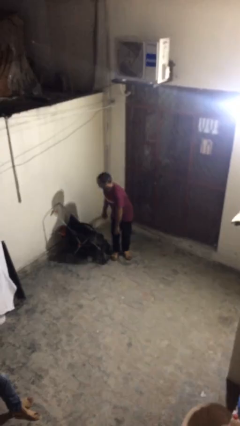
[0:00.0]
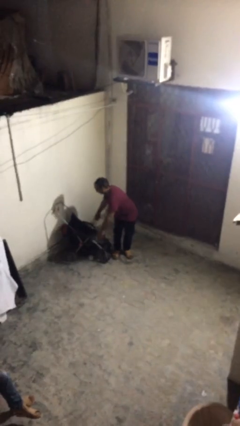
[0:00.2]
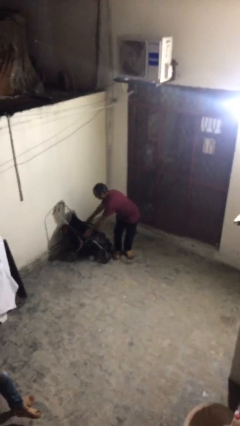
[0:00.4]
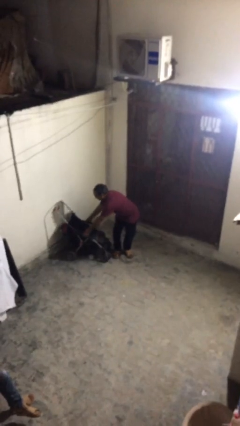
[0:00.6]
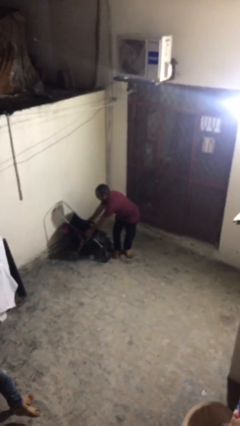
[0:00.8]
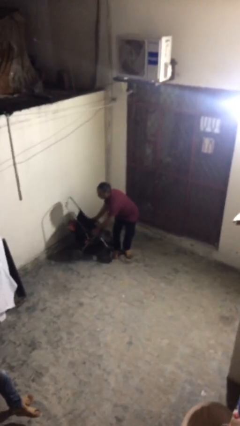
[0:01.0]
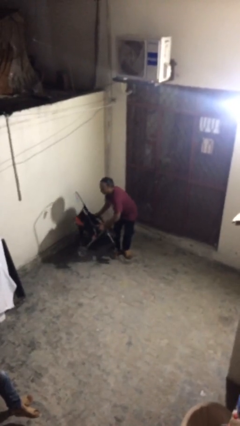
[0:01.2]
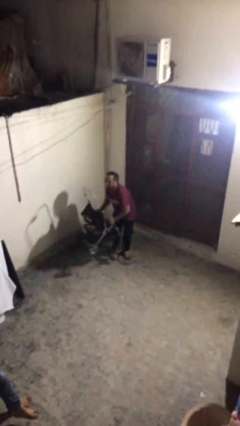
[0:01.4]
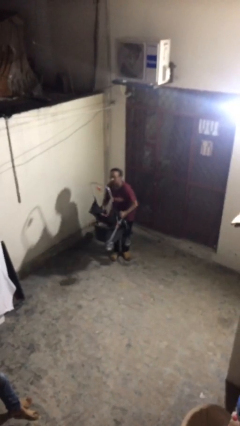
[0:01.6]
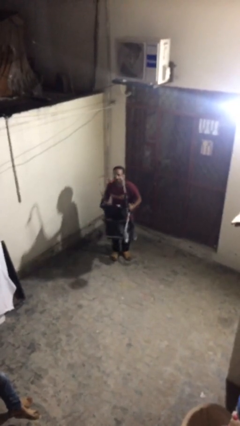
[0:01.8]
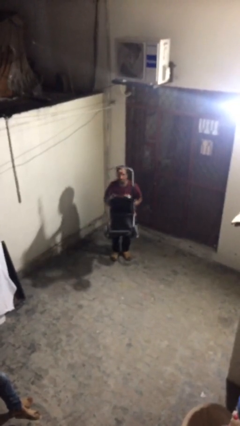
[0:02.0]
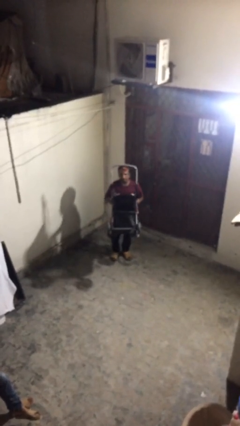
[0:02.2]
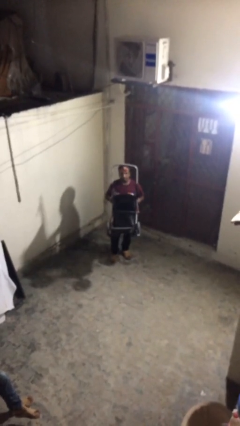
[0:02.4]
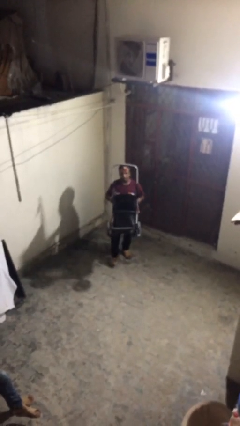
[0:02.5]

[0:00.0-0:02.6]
person picks up object from floor

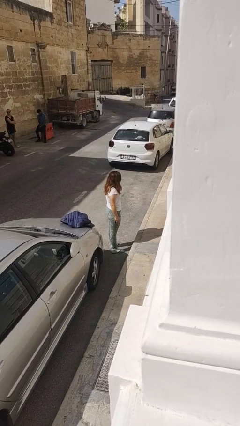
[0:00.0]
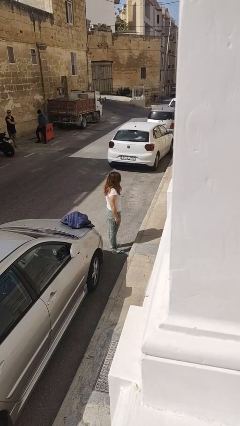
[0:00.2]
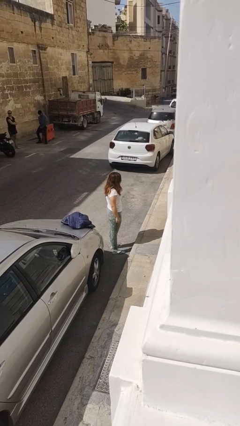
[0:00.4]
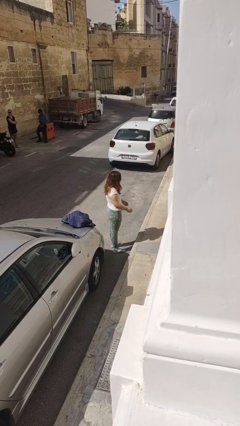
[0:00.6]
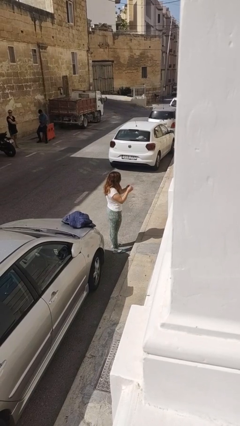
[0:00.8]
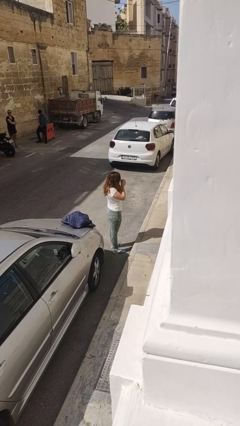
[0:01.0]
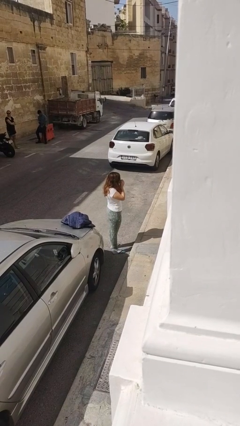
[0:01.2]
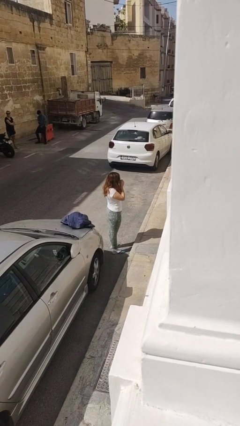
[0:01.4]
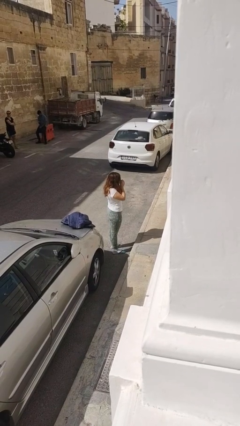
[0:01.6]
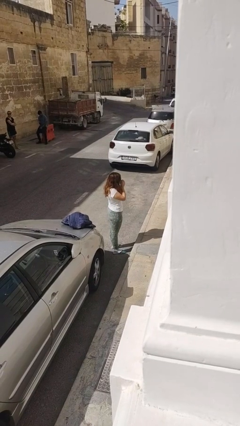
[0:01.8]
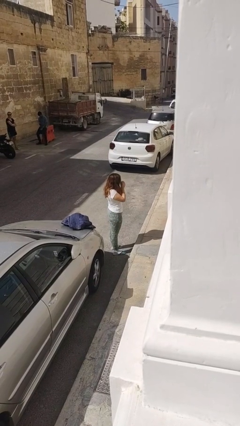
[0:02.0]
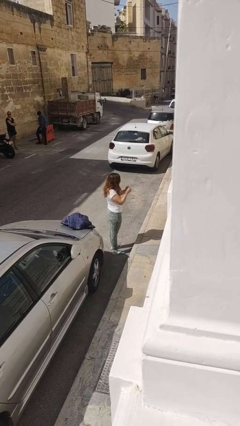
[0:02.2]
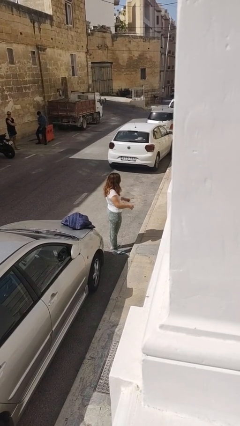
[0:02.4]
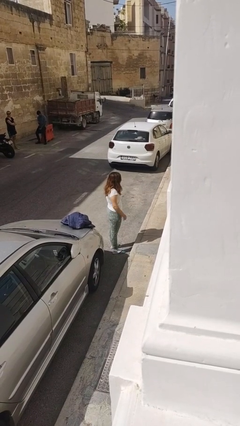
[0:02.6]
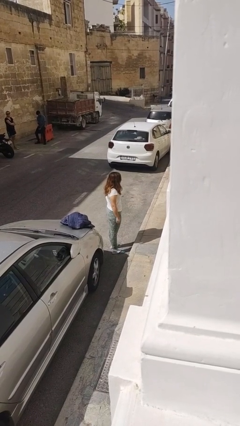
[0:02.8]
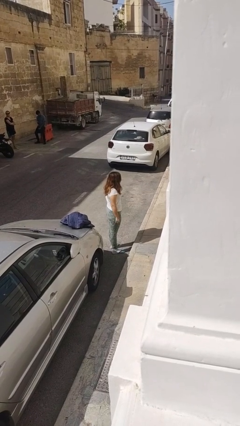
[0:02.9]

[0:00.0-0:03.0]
person blows into hands

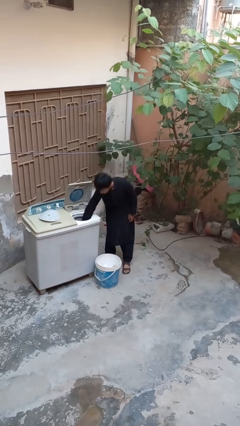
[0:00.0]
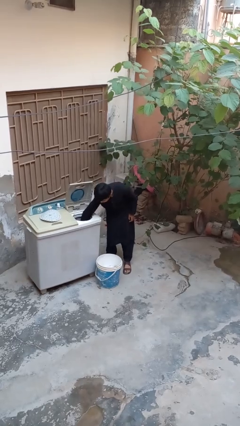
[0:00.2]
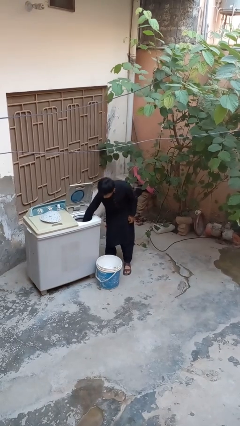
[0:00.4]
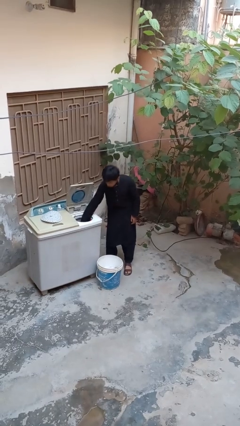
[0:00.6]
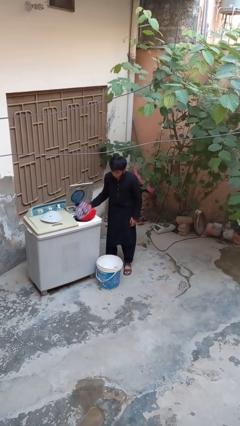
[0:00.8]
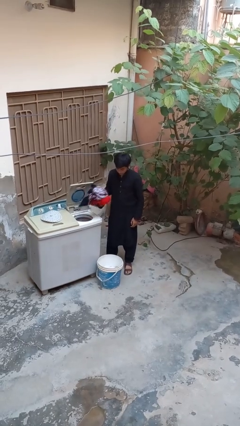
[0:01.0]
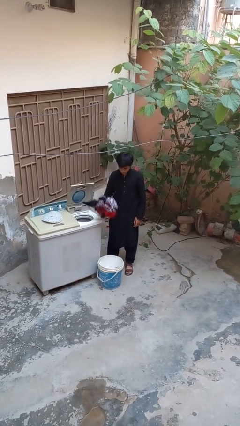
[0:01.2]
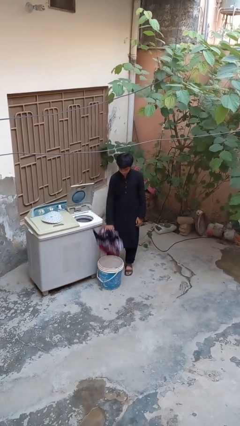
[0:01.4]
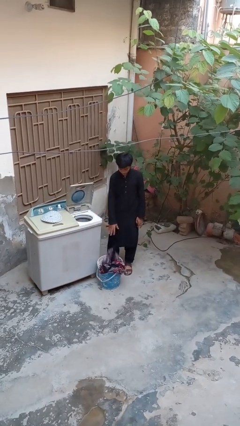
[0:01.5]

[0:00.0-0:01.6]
person unloads dryer

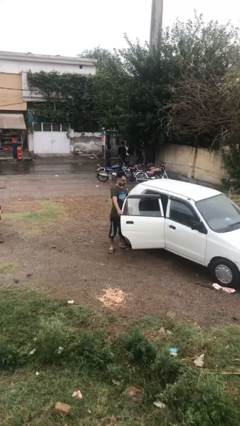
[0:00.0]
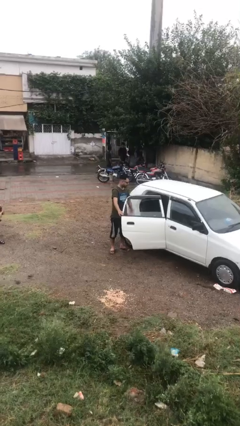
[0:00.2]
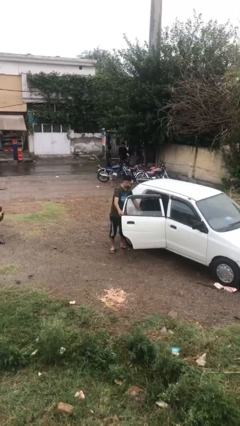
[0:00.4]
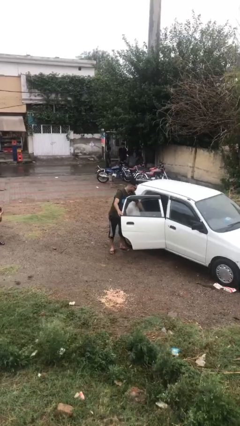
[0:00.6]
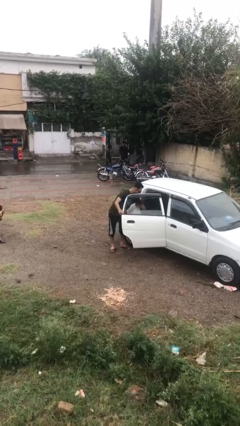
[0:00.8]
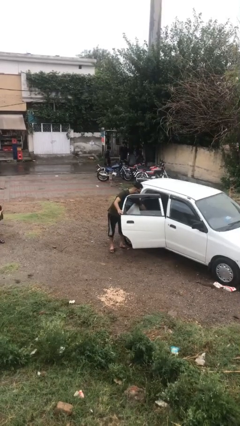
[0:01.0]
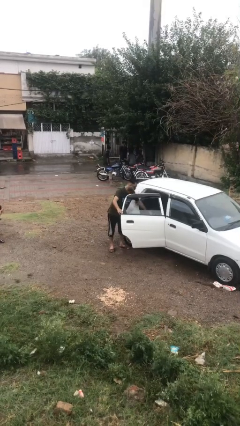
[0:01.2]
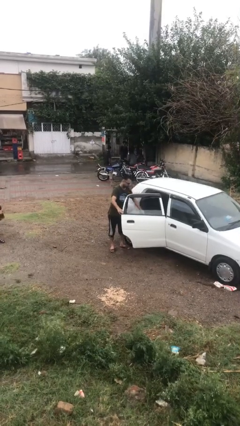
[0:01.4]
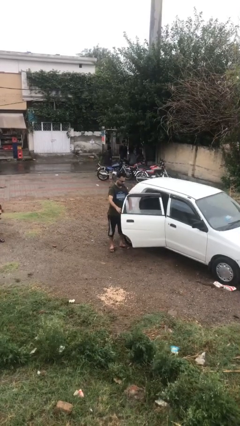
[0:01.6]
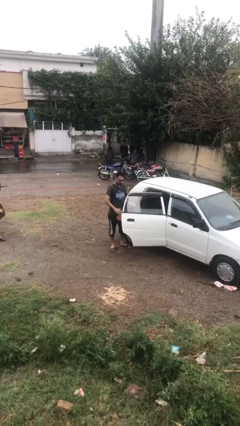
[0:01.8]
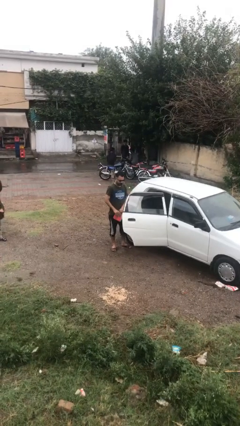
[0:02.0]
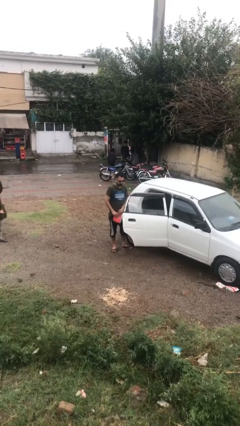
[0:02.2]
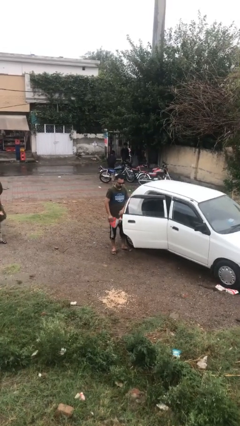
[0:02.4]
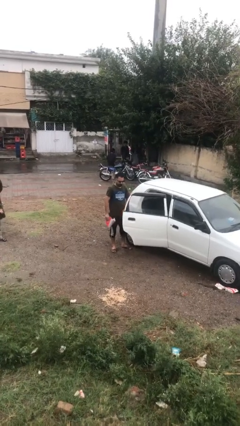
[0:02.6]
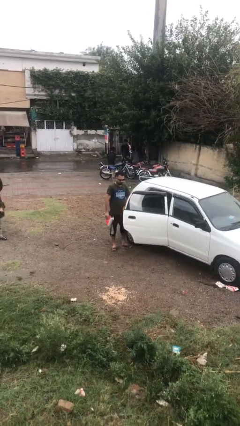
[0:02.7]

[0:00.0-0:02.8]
person unloads car

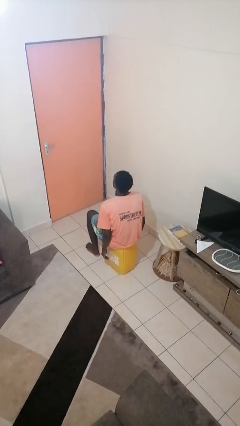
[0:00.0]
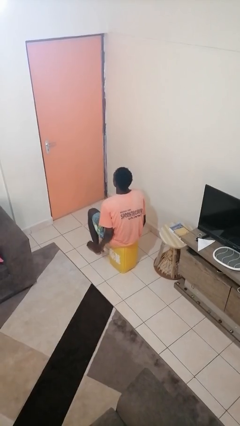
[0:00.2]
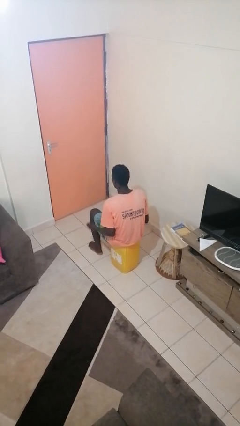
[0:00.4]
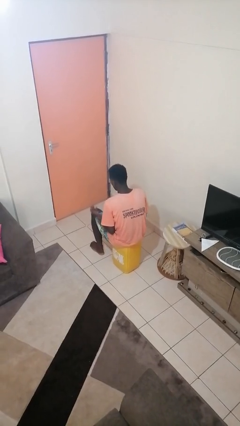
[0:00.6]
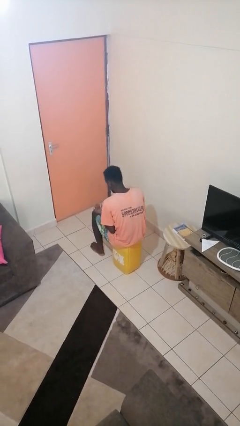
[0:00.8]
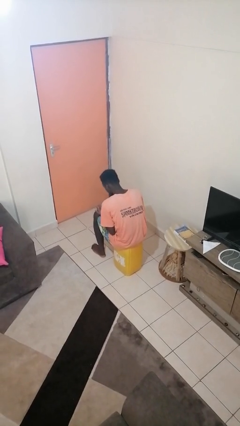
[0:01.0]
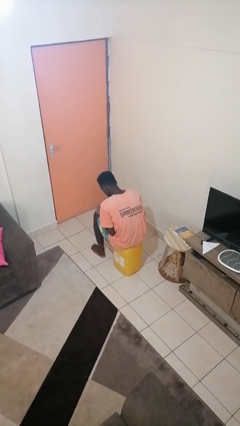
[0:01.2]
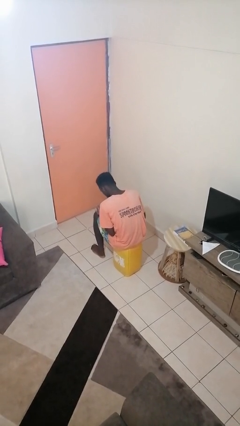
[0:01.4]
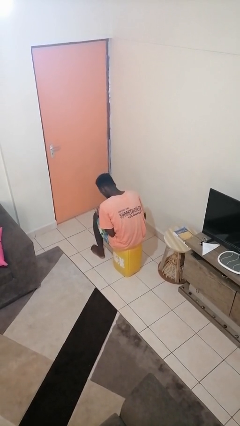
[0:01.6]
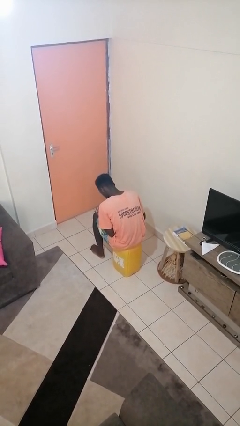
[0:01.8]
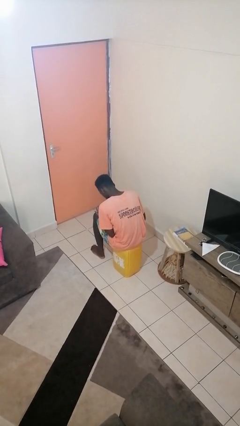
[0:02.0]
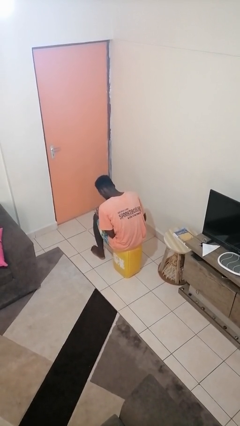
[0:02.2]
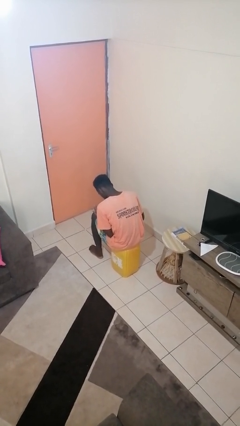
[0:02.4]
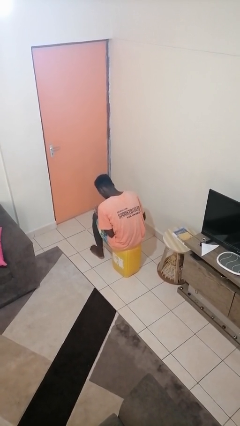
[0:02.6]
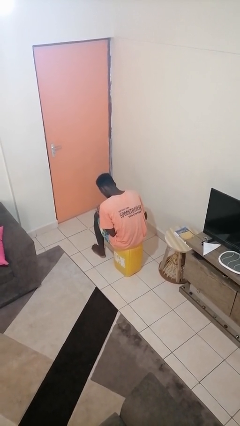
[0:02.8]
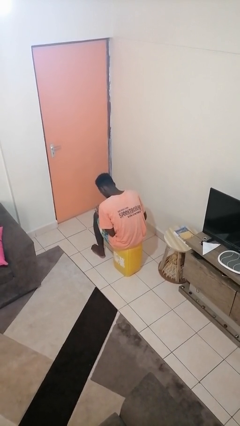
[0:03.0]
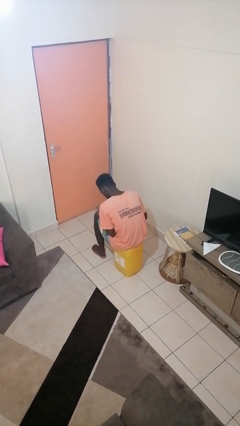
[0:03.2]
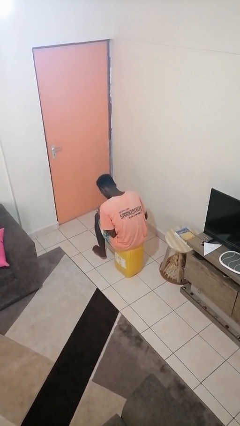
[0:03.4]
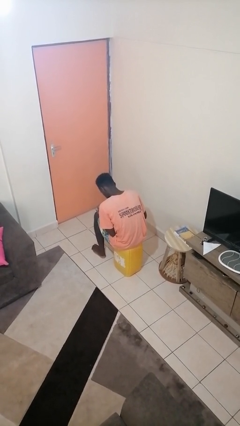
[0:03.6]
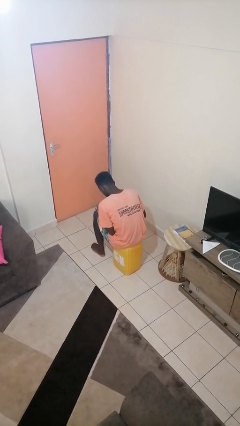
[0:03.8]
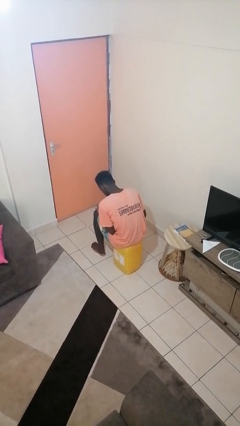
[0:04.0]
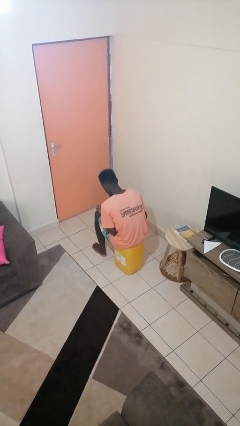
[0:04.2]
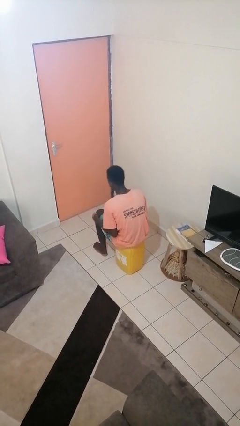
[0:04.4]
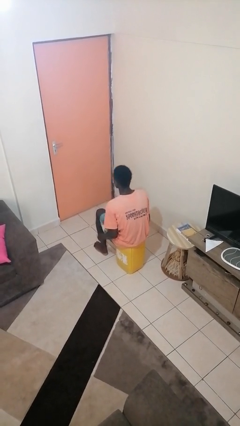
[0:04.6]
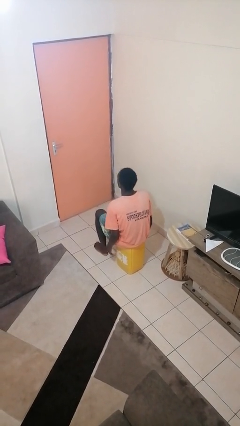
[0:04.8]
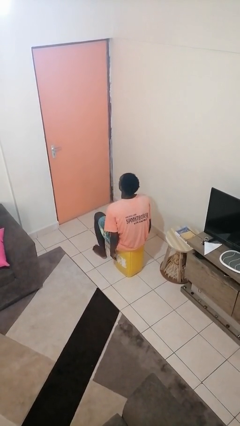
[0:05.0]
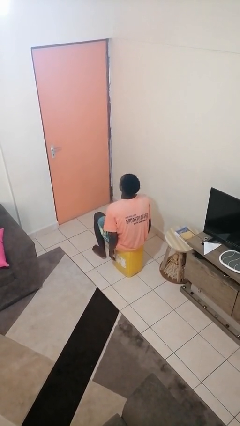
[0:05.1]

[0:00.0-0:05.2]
person looks at hands in lap

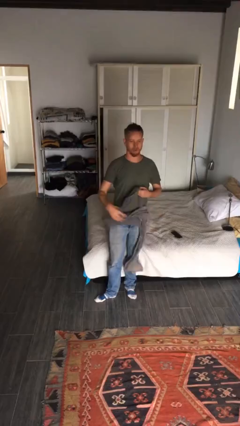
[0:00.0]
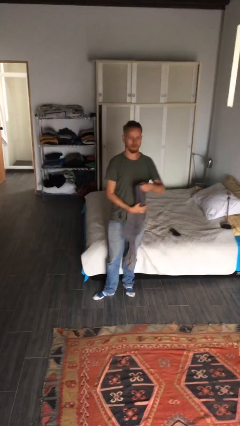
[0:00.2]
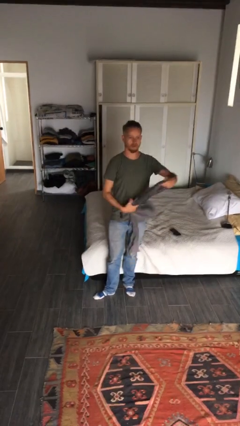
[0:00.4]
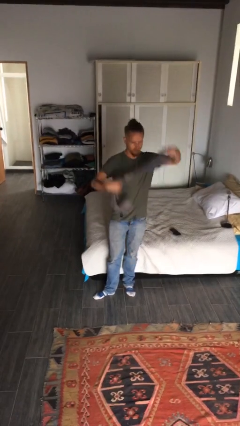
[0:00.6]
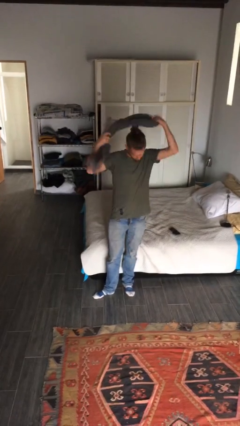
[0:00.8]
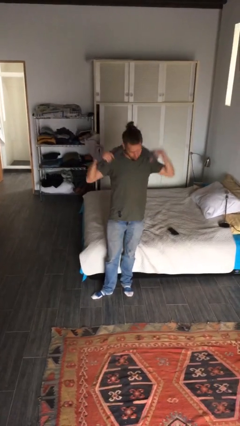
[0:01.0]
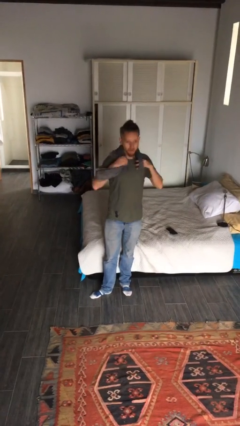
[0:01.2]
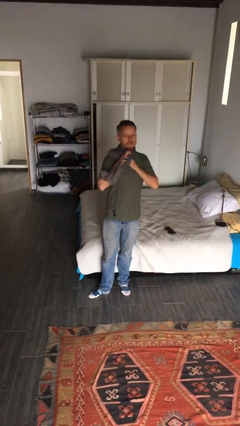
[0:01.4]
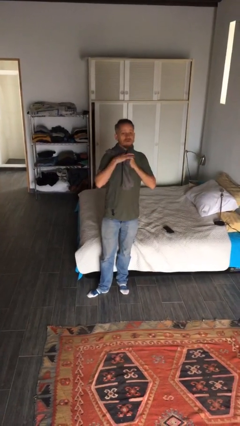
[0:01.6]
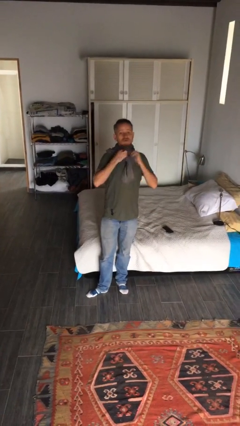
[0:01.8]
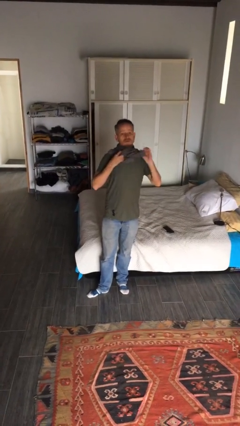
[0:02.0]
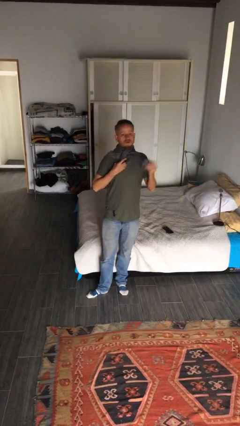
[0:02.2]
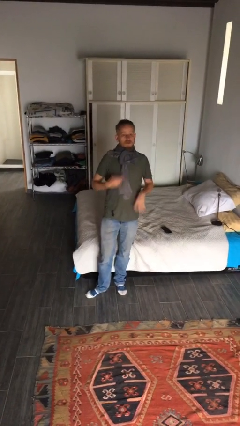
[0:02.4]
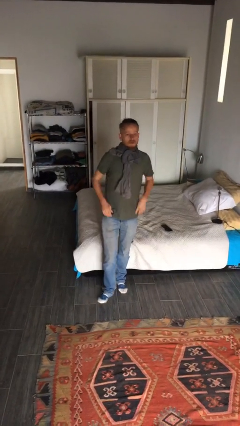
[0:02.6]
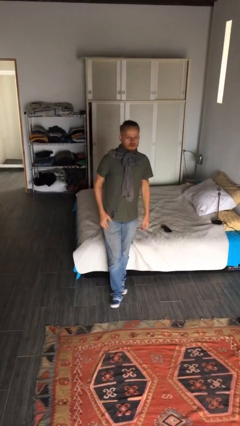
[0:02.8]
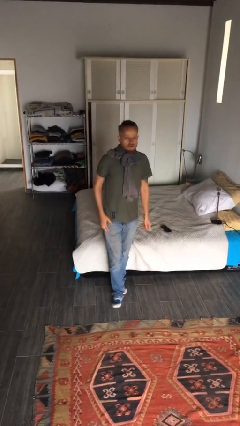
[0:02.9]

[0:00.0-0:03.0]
person puts on scarf
